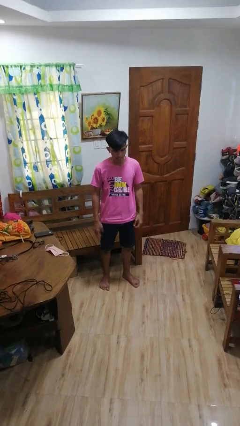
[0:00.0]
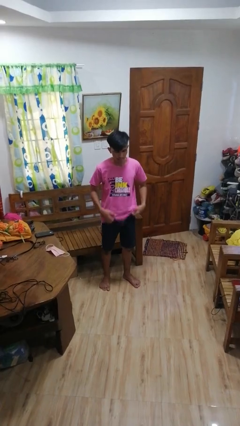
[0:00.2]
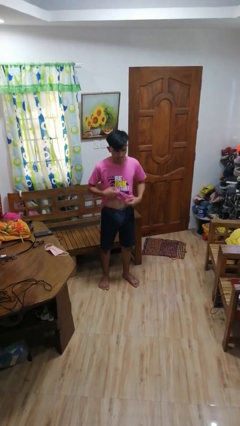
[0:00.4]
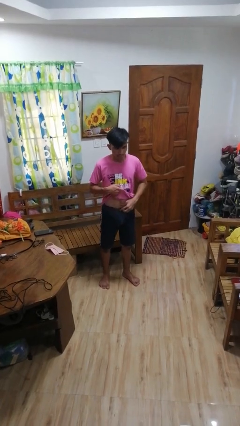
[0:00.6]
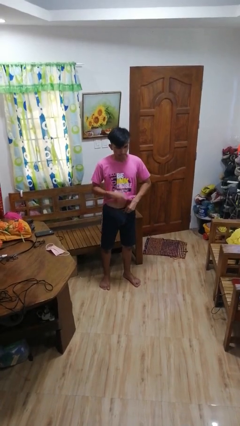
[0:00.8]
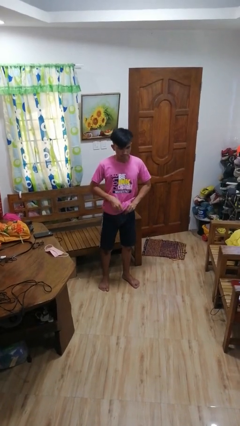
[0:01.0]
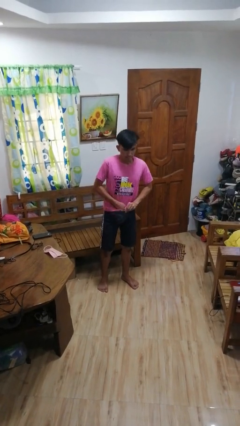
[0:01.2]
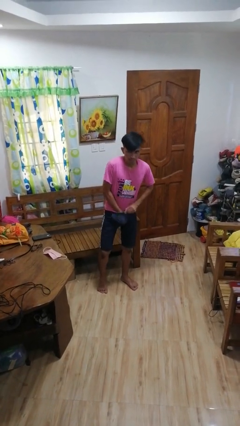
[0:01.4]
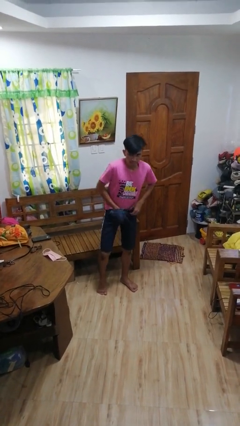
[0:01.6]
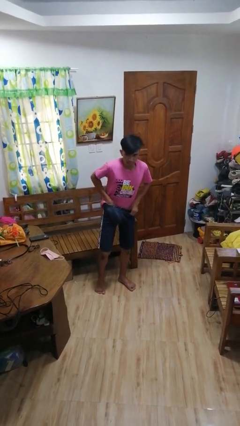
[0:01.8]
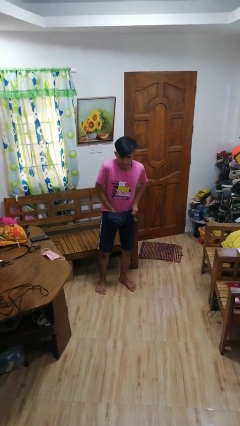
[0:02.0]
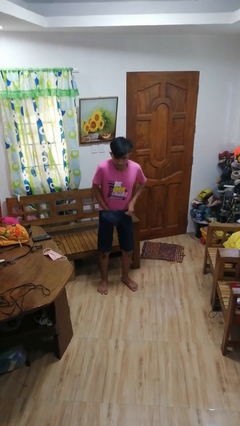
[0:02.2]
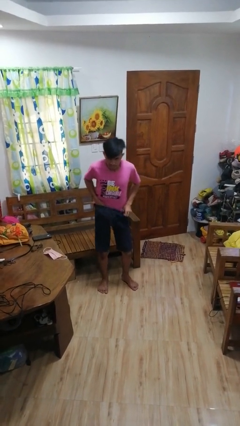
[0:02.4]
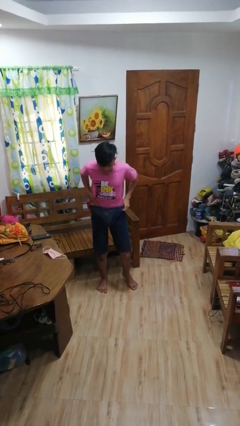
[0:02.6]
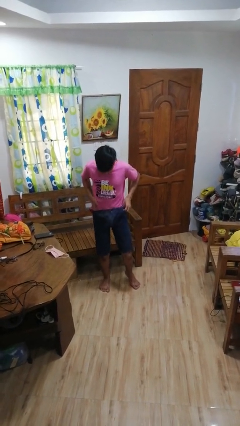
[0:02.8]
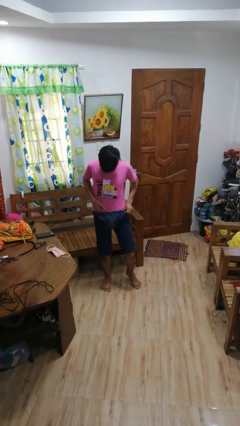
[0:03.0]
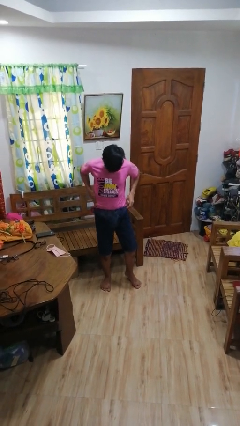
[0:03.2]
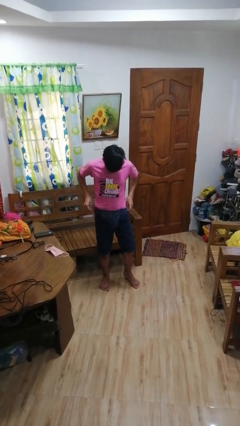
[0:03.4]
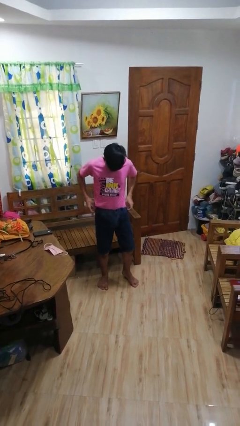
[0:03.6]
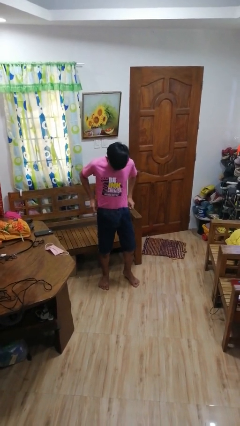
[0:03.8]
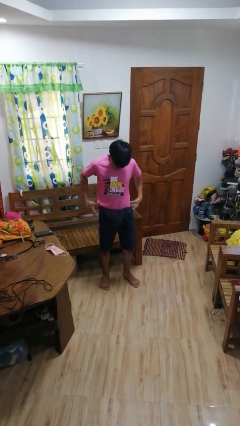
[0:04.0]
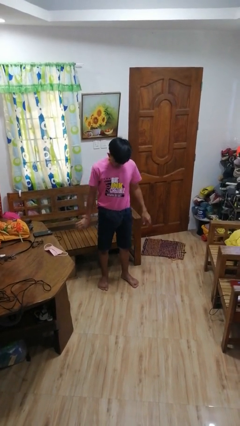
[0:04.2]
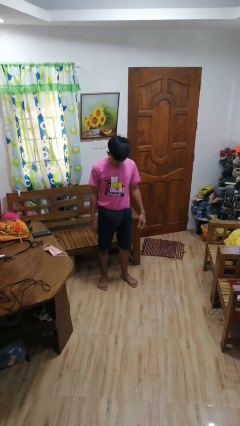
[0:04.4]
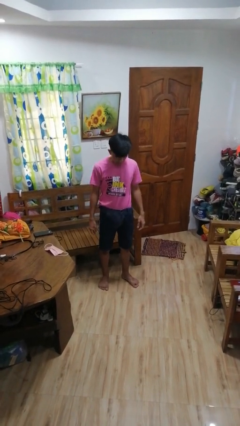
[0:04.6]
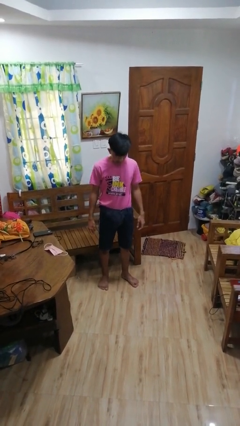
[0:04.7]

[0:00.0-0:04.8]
person tucks in shirt

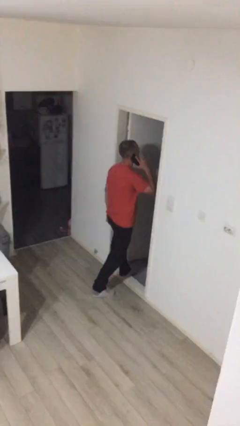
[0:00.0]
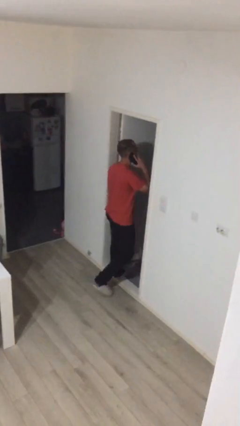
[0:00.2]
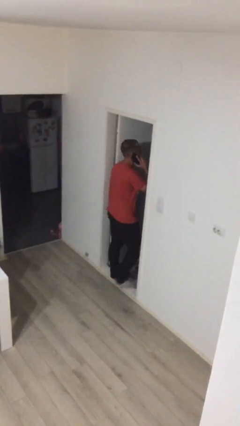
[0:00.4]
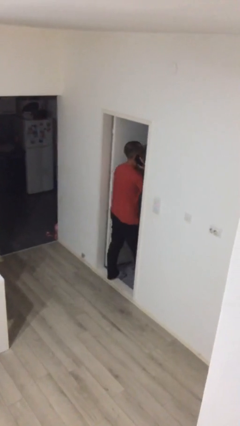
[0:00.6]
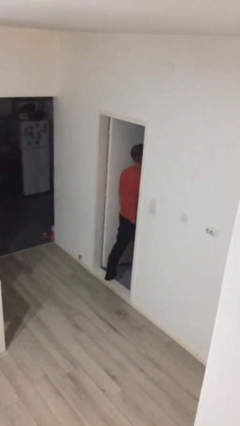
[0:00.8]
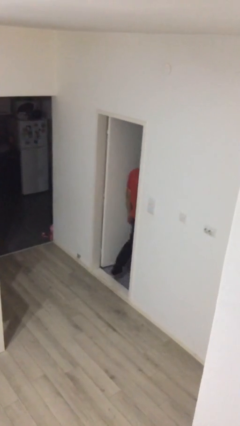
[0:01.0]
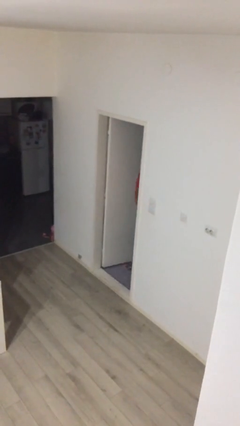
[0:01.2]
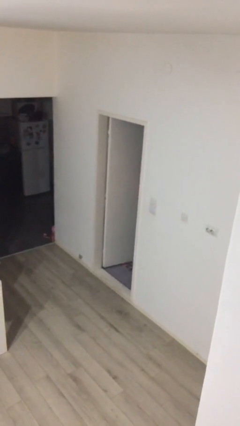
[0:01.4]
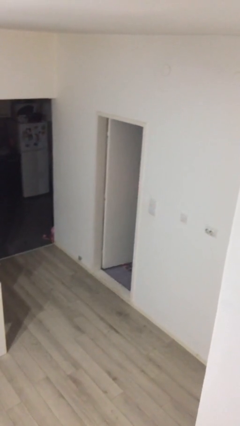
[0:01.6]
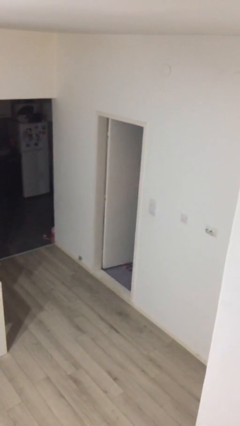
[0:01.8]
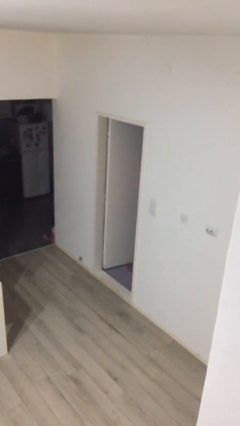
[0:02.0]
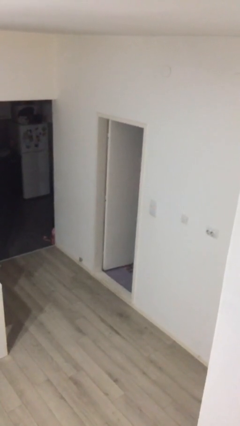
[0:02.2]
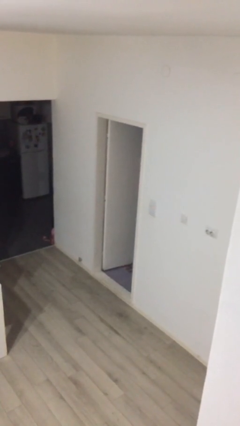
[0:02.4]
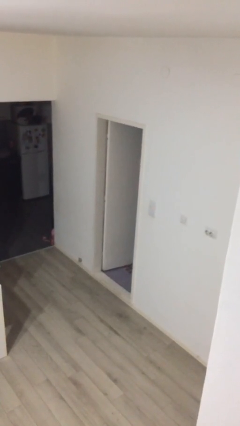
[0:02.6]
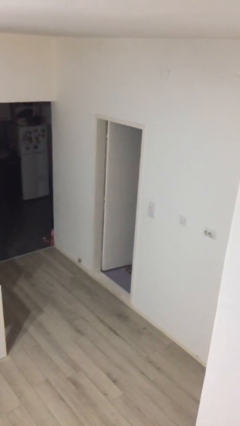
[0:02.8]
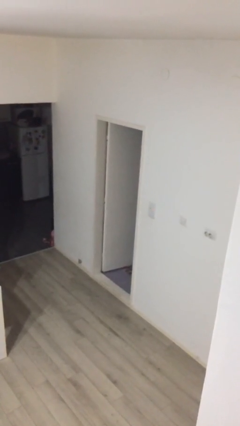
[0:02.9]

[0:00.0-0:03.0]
person exits scene through structure

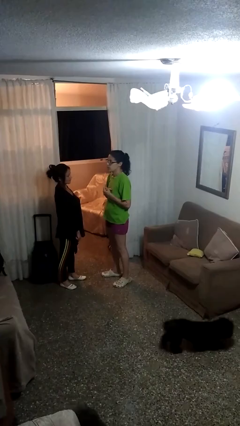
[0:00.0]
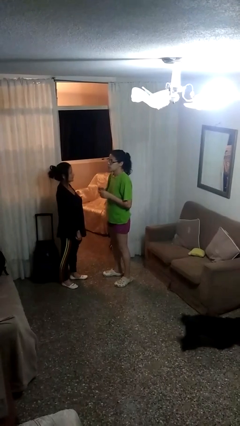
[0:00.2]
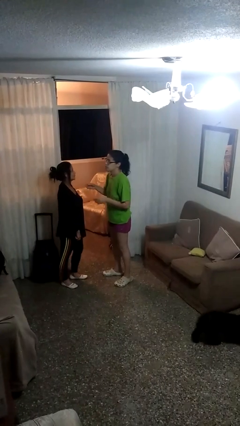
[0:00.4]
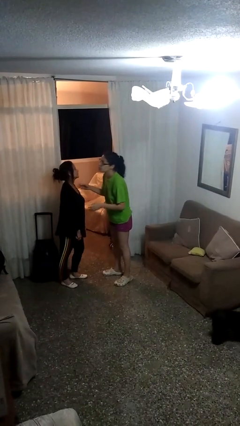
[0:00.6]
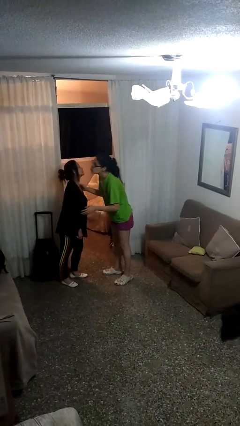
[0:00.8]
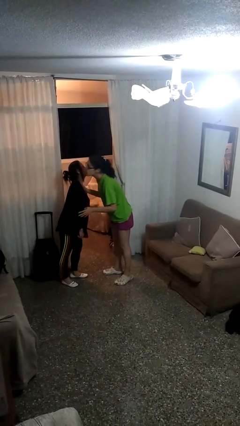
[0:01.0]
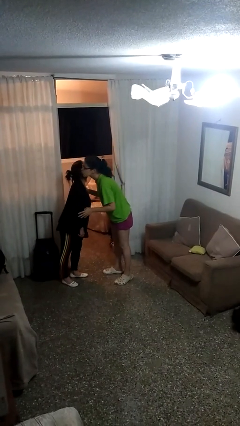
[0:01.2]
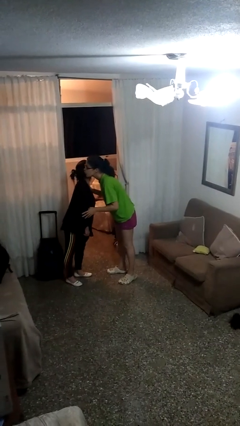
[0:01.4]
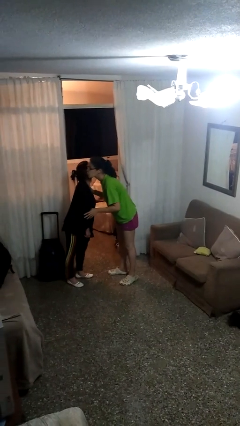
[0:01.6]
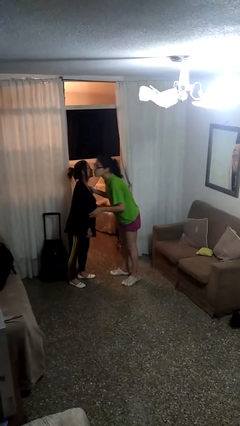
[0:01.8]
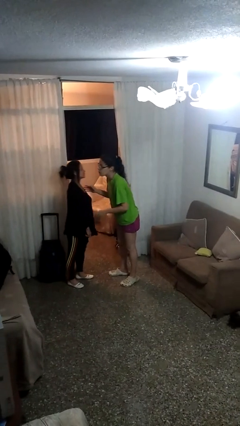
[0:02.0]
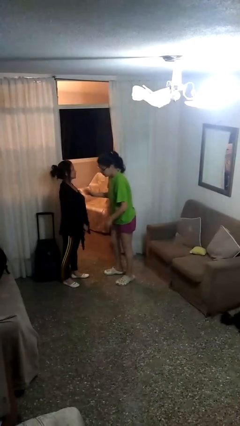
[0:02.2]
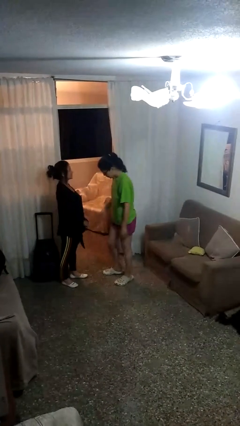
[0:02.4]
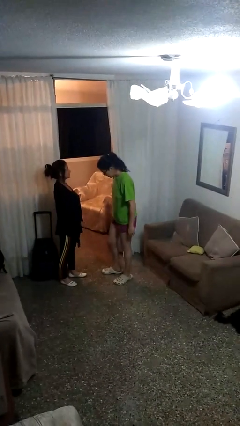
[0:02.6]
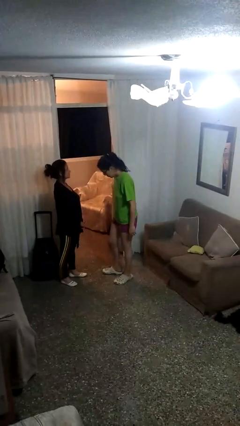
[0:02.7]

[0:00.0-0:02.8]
person kisses cheek of person

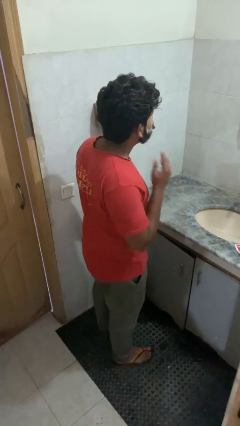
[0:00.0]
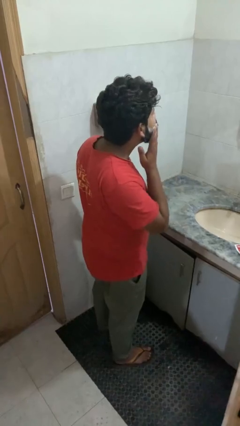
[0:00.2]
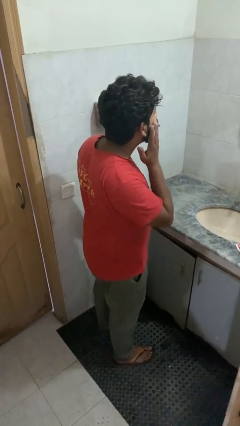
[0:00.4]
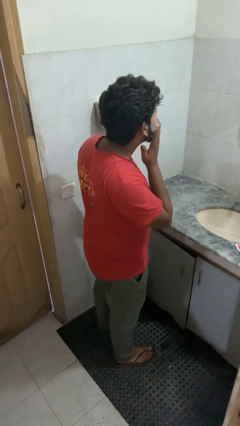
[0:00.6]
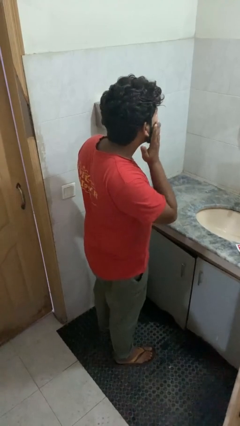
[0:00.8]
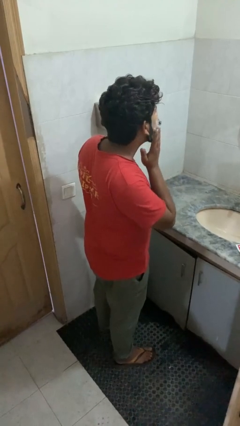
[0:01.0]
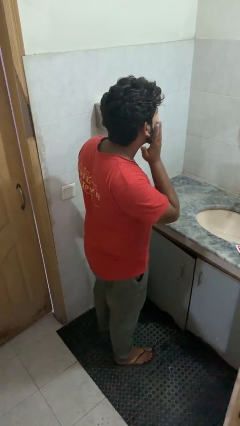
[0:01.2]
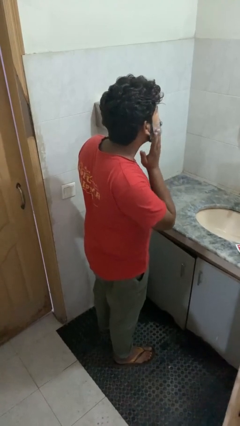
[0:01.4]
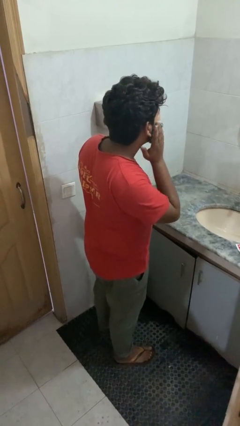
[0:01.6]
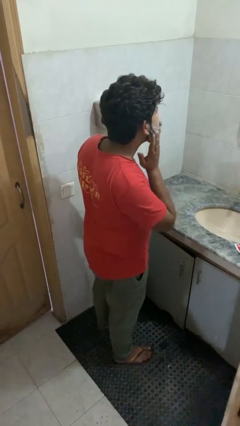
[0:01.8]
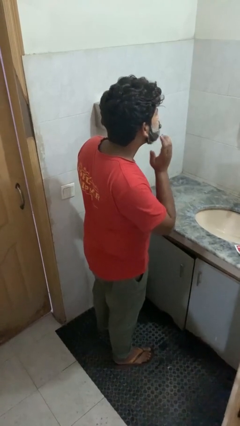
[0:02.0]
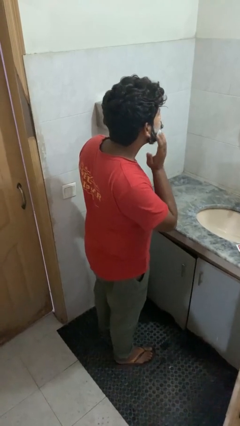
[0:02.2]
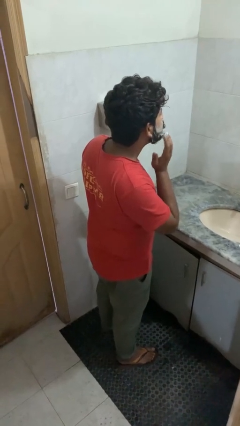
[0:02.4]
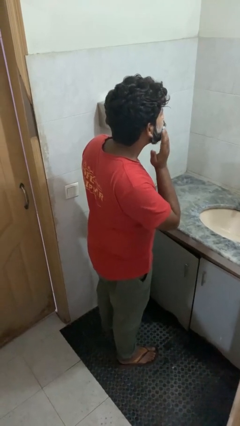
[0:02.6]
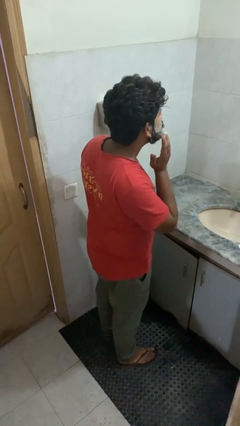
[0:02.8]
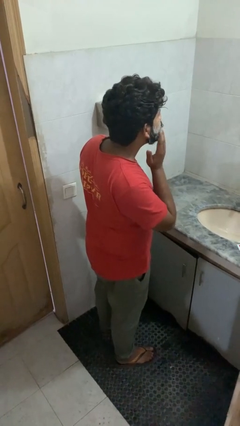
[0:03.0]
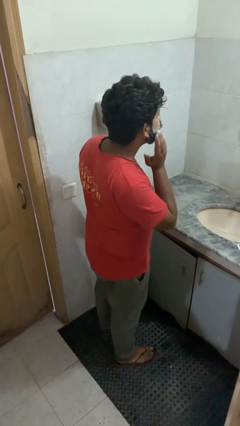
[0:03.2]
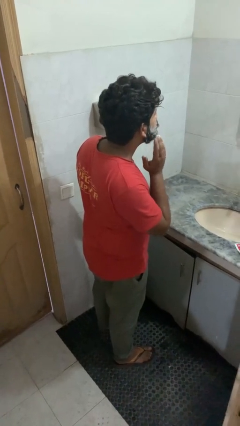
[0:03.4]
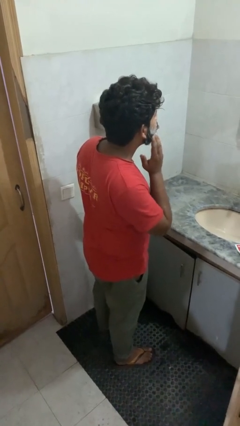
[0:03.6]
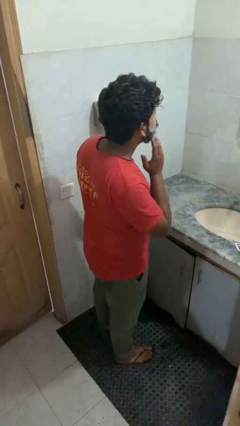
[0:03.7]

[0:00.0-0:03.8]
person applies shaving cream

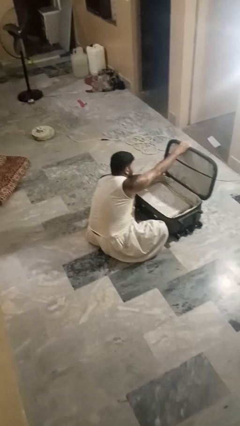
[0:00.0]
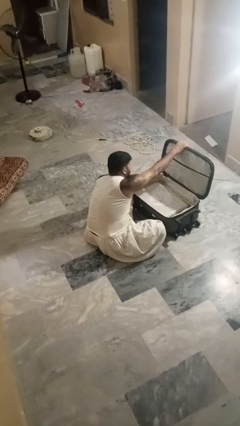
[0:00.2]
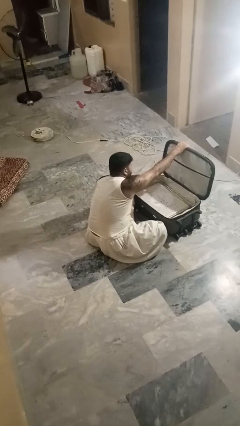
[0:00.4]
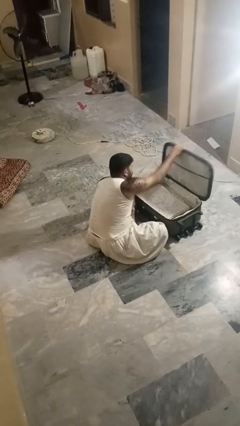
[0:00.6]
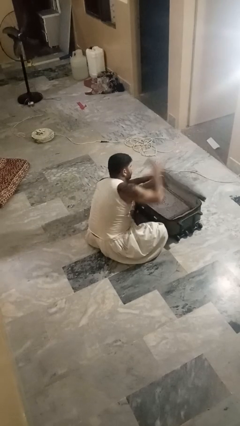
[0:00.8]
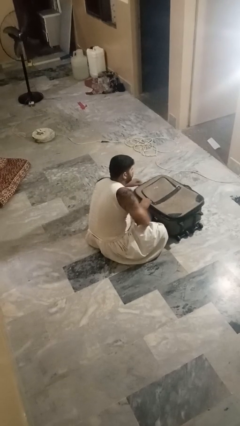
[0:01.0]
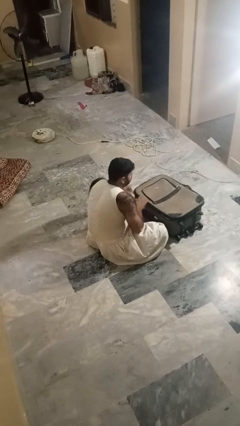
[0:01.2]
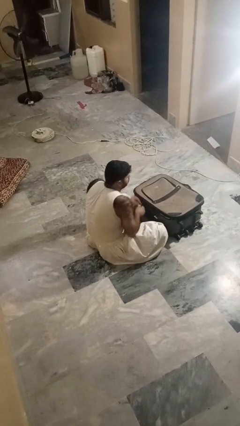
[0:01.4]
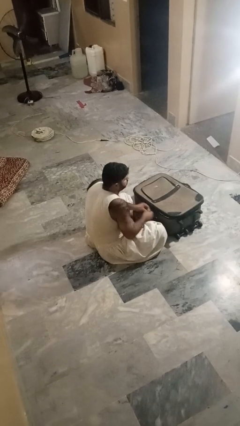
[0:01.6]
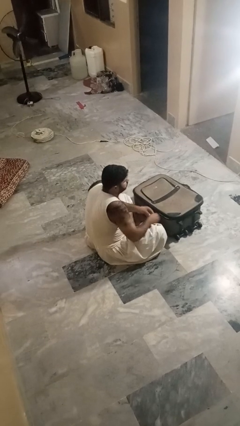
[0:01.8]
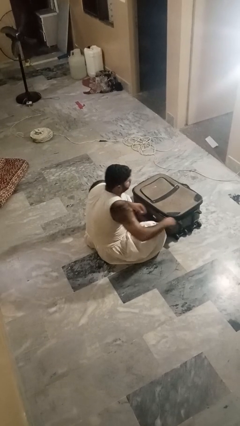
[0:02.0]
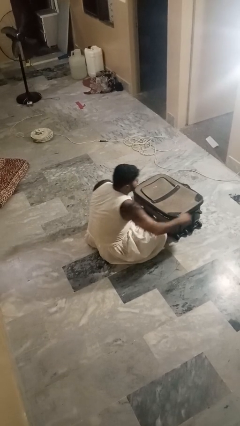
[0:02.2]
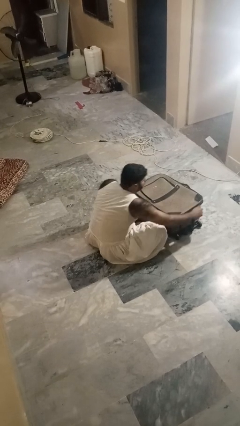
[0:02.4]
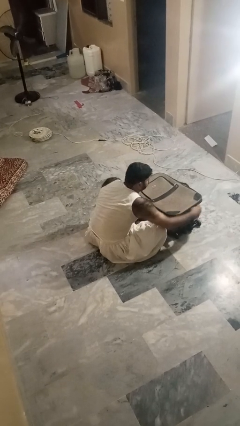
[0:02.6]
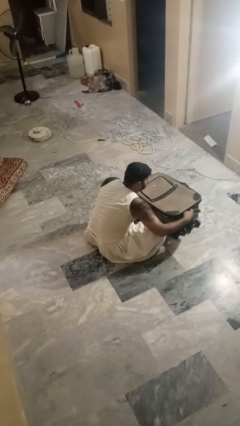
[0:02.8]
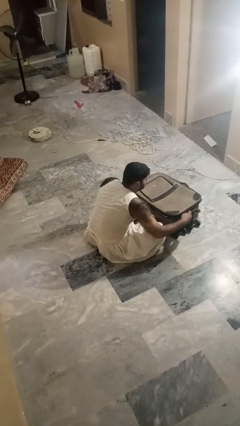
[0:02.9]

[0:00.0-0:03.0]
person closes suitcase

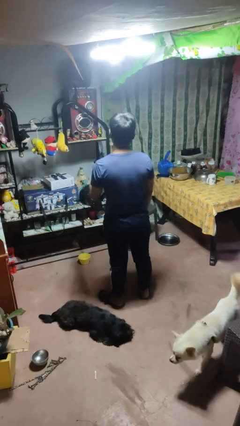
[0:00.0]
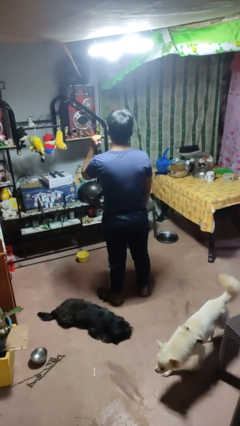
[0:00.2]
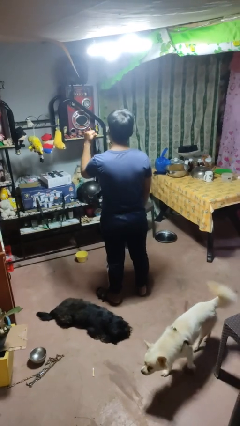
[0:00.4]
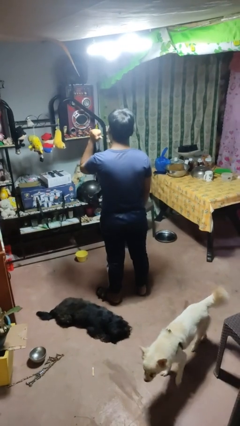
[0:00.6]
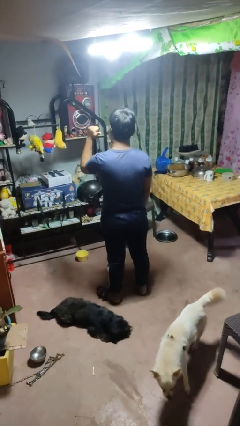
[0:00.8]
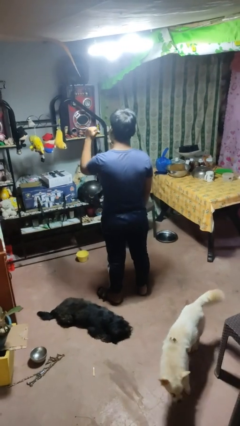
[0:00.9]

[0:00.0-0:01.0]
person gestures behind me
